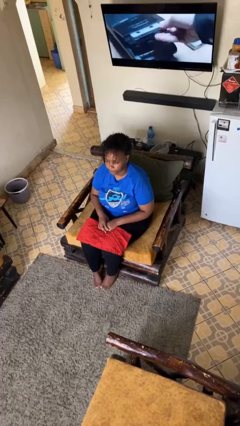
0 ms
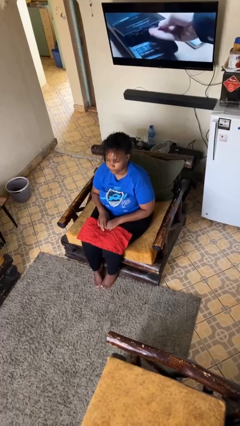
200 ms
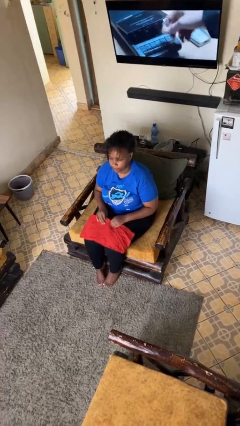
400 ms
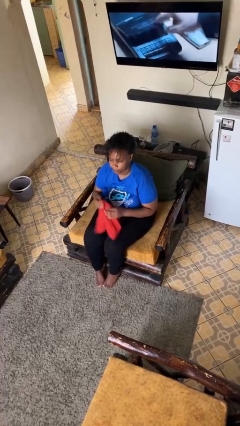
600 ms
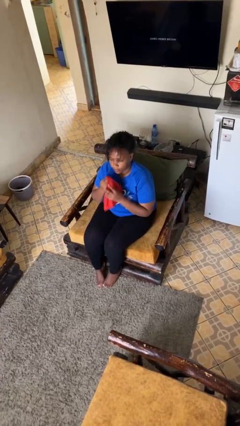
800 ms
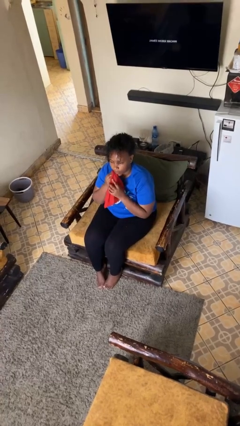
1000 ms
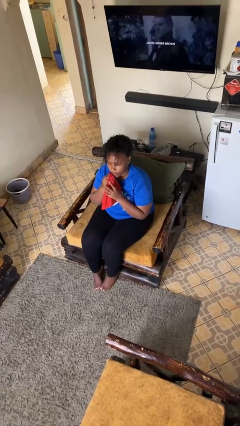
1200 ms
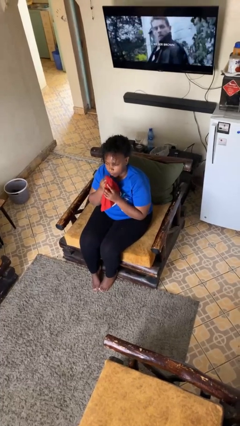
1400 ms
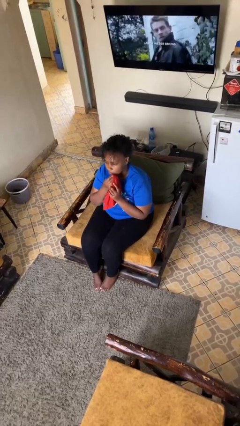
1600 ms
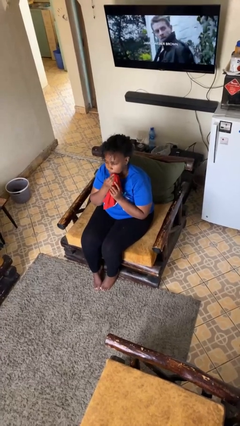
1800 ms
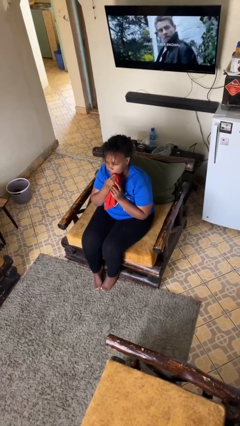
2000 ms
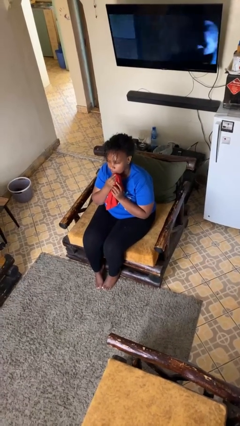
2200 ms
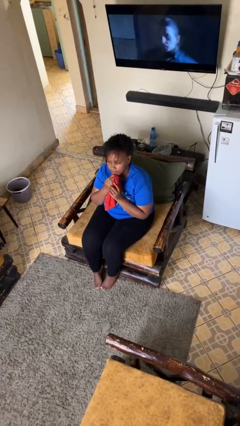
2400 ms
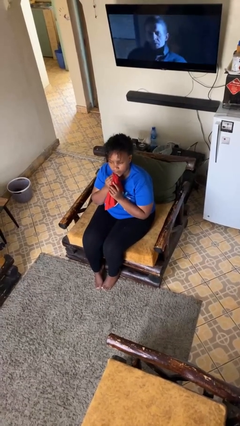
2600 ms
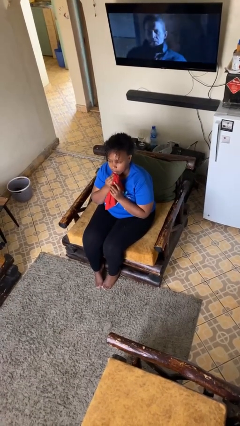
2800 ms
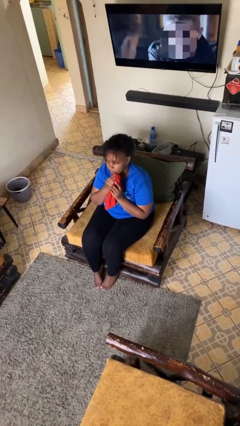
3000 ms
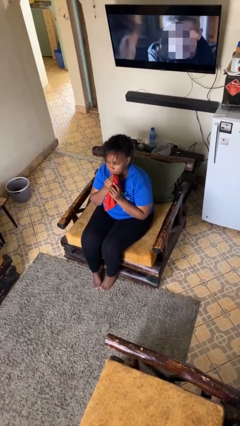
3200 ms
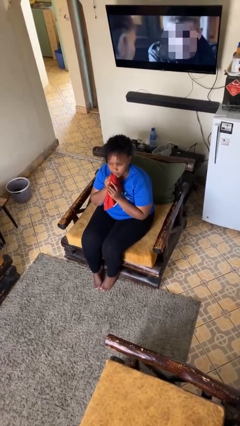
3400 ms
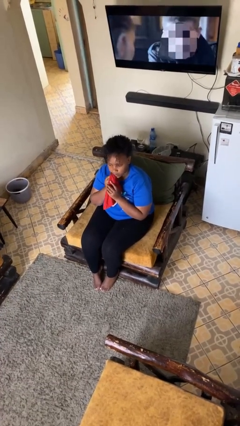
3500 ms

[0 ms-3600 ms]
person wipes mouth with napkin

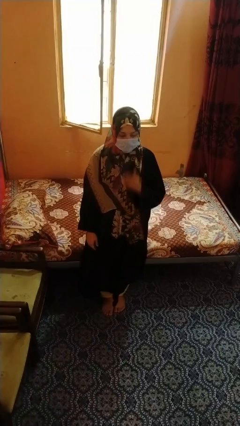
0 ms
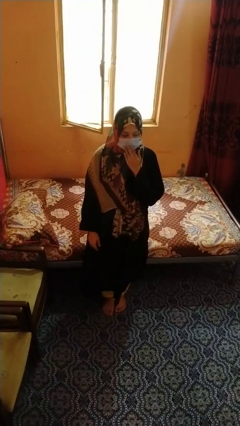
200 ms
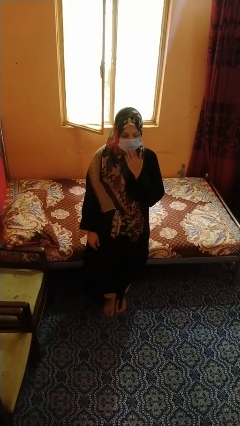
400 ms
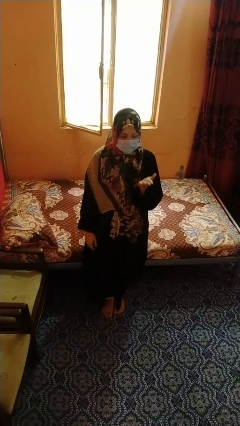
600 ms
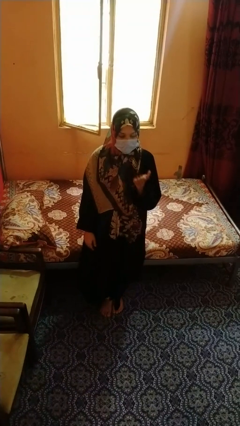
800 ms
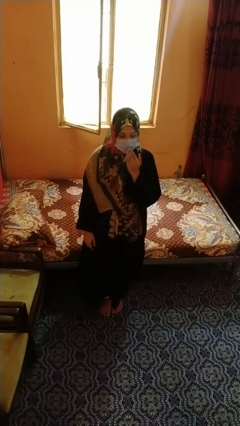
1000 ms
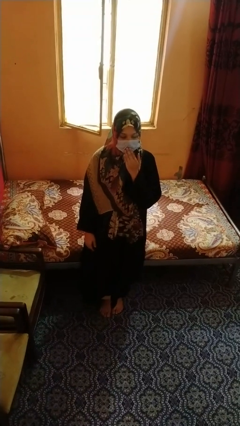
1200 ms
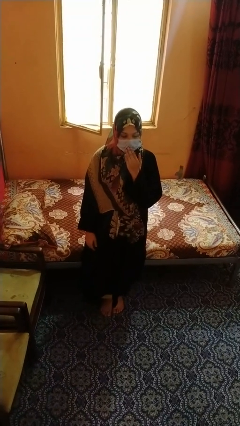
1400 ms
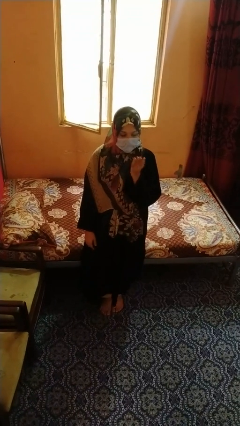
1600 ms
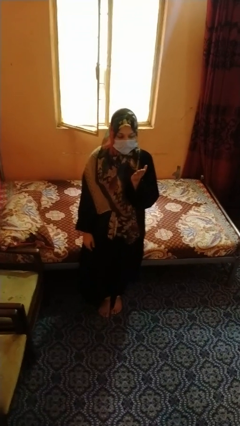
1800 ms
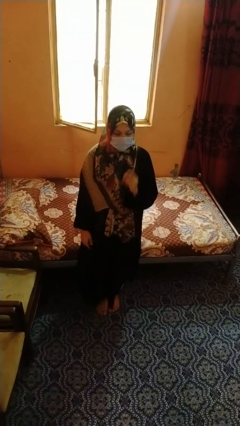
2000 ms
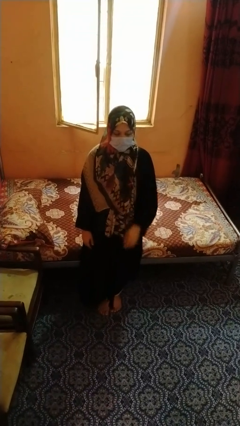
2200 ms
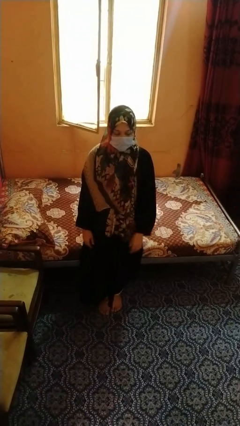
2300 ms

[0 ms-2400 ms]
person gestures blow kiss

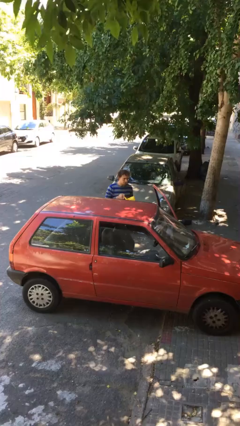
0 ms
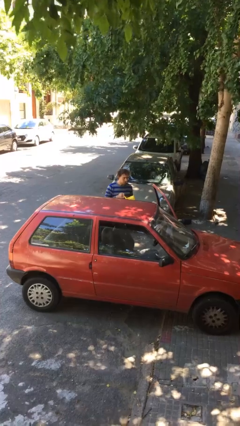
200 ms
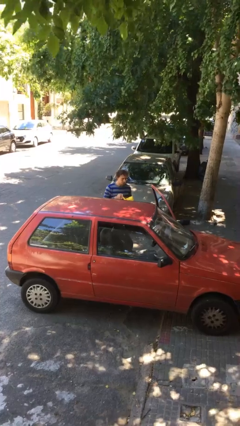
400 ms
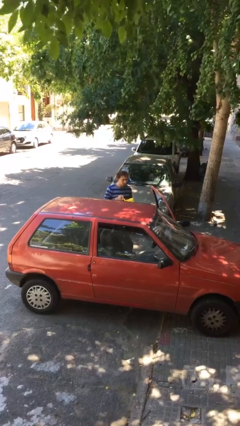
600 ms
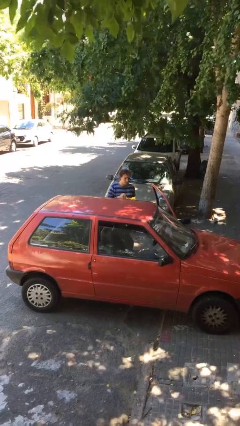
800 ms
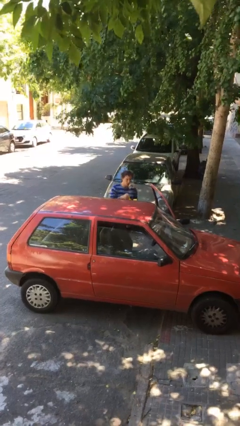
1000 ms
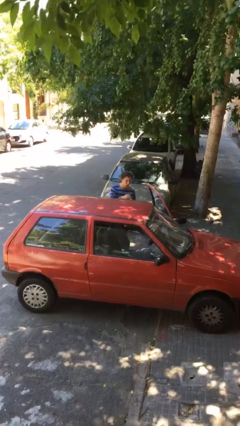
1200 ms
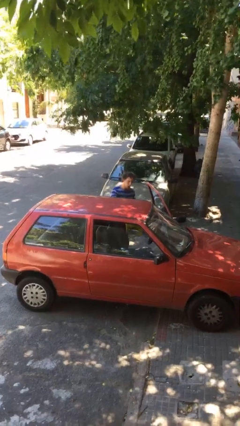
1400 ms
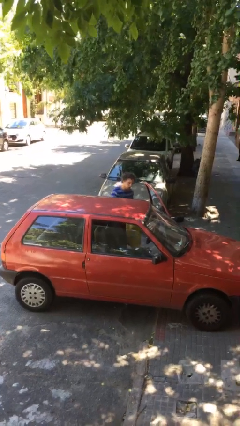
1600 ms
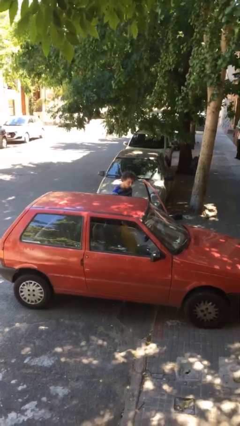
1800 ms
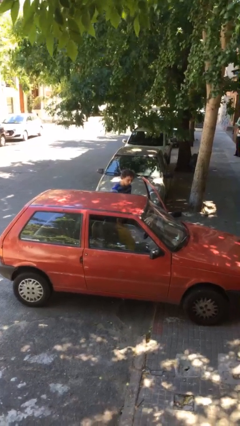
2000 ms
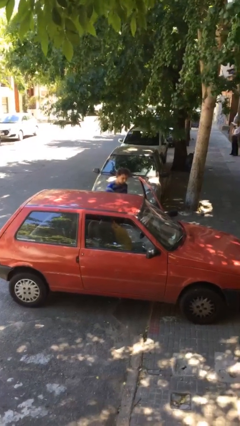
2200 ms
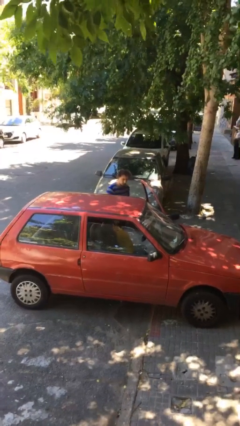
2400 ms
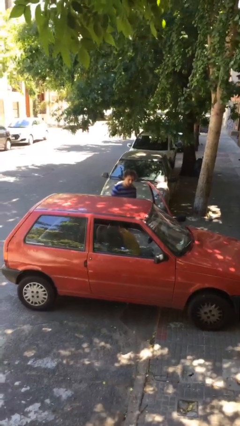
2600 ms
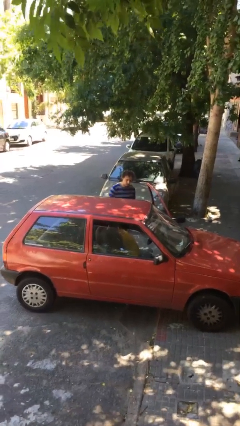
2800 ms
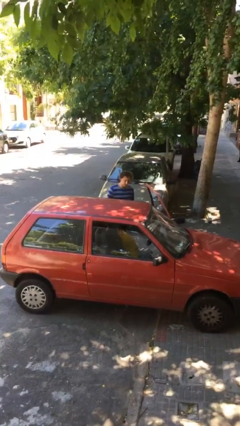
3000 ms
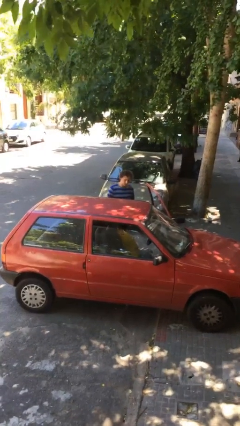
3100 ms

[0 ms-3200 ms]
person loads car

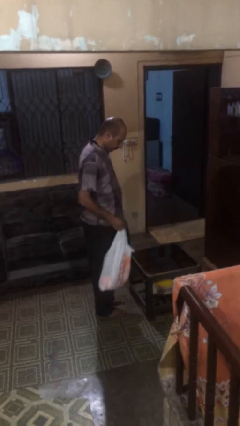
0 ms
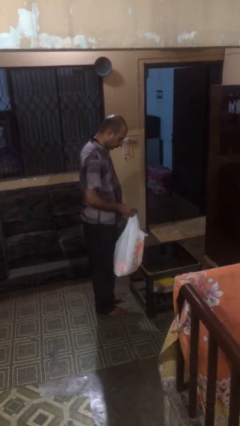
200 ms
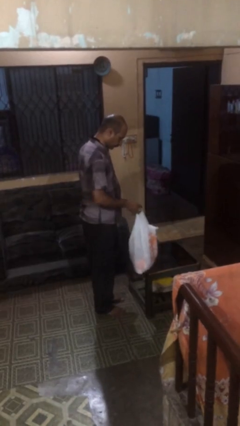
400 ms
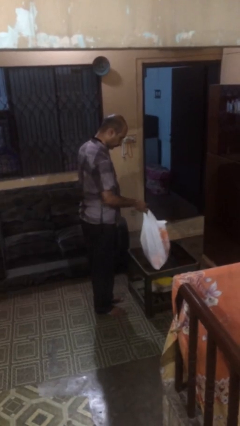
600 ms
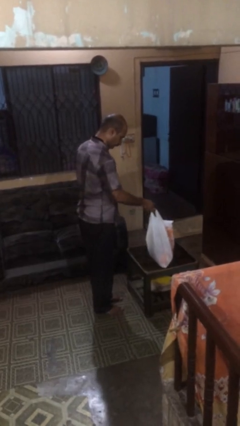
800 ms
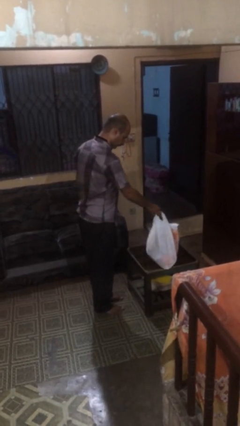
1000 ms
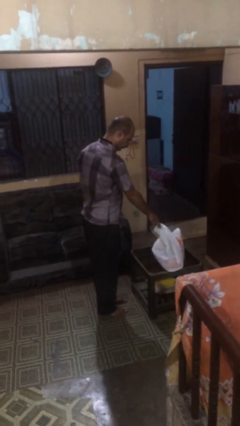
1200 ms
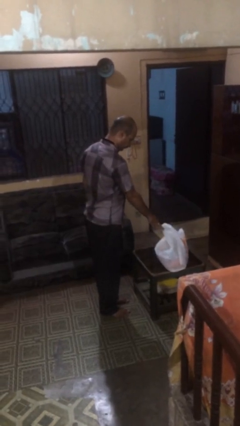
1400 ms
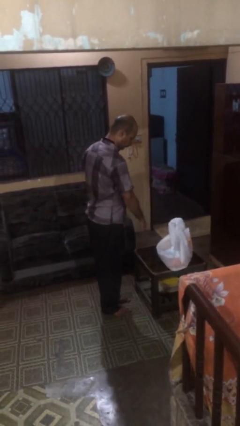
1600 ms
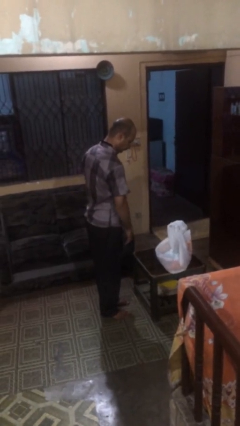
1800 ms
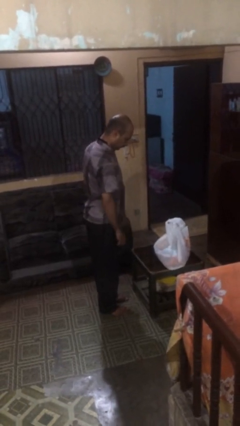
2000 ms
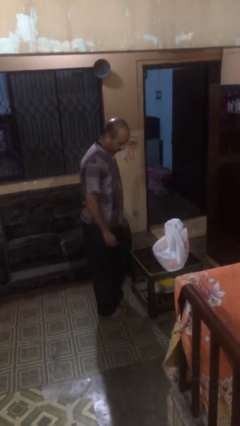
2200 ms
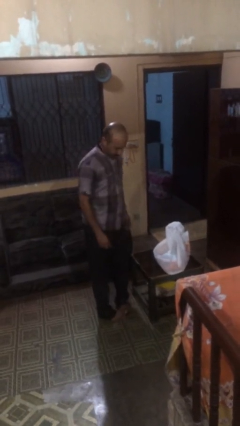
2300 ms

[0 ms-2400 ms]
person puts down object on table

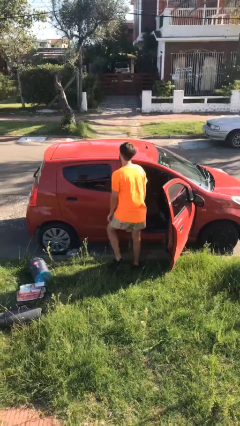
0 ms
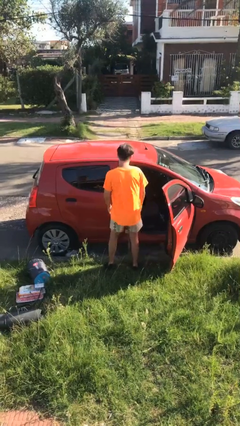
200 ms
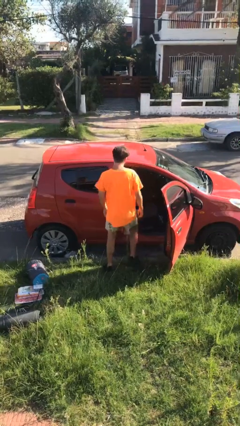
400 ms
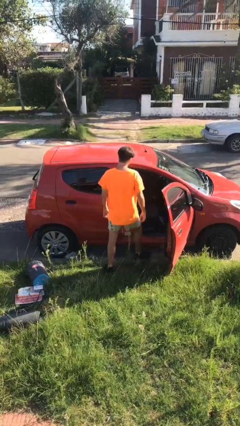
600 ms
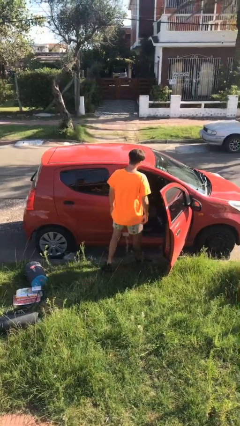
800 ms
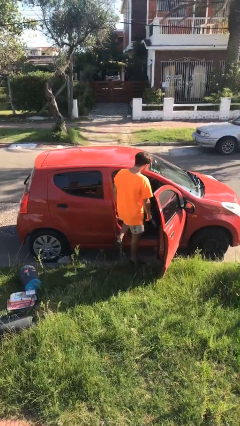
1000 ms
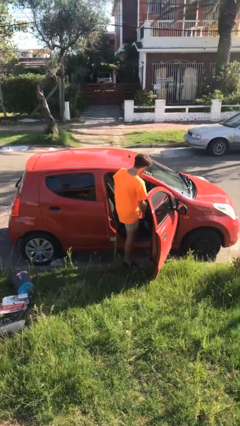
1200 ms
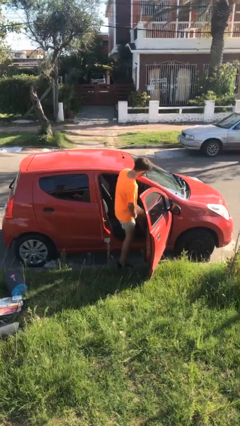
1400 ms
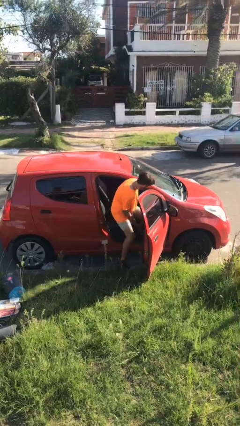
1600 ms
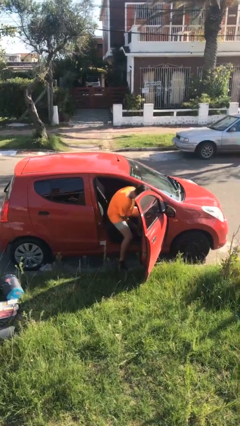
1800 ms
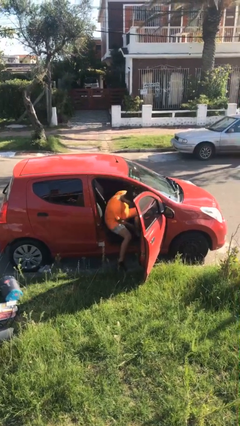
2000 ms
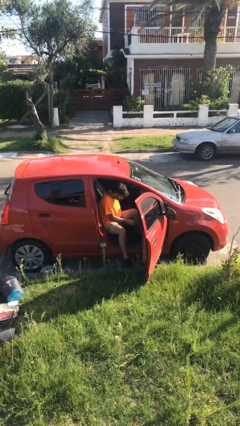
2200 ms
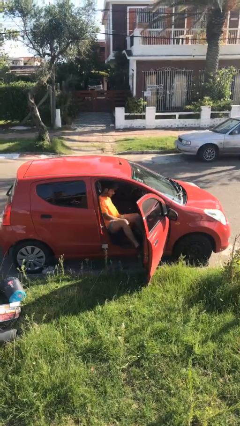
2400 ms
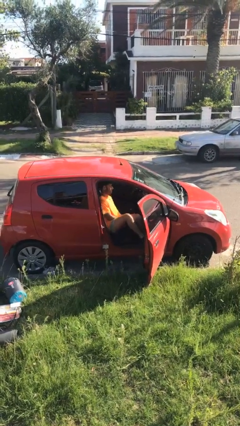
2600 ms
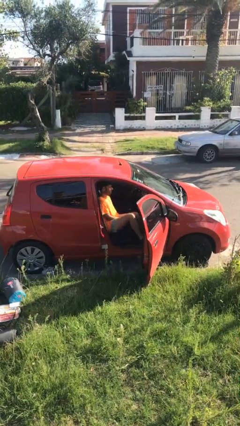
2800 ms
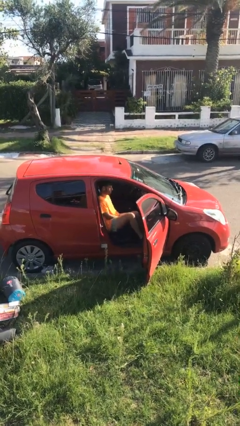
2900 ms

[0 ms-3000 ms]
person enters car

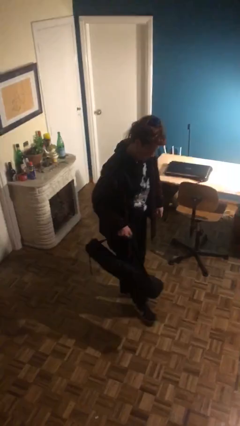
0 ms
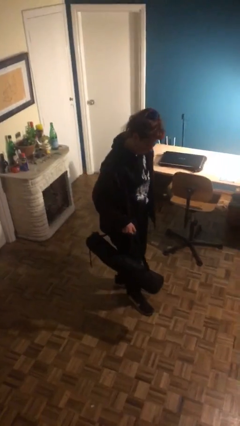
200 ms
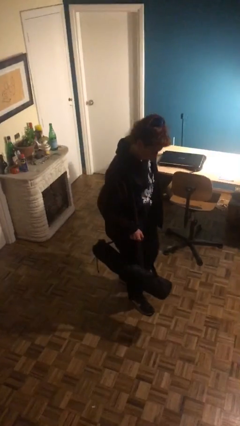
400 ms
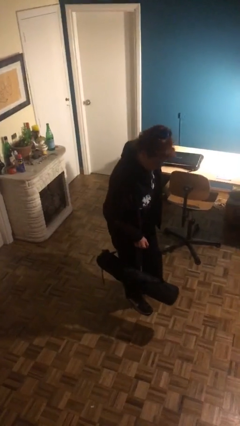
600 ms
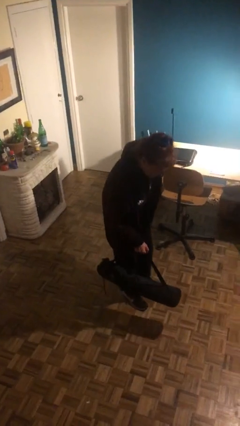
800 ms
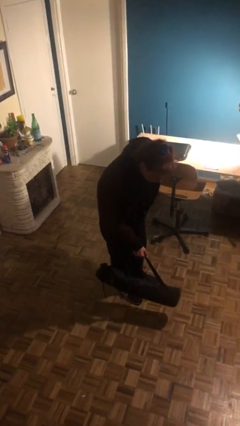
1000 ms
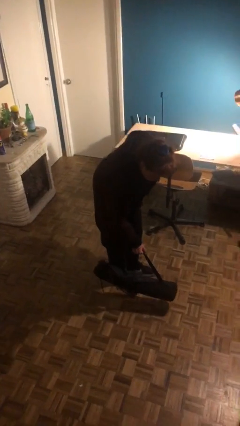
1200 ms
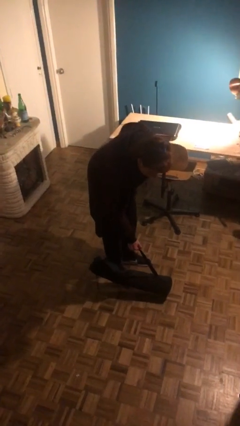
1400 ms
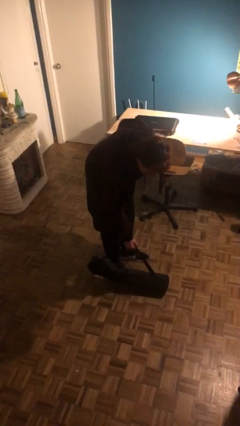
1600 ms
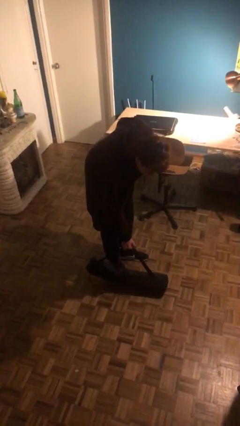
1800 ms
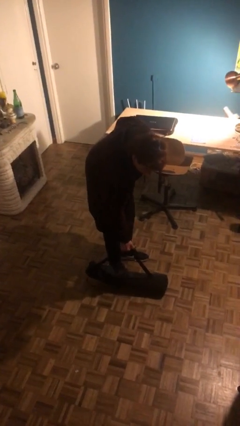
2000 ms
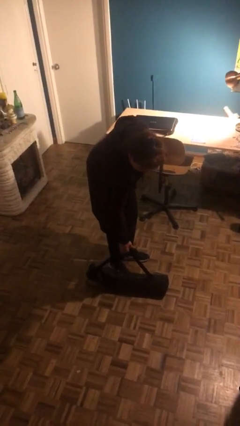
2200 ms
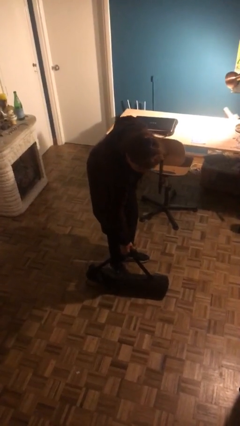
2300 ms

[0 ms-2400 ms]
person puts down object on floor

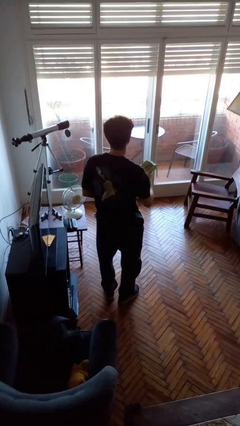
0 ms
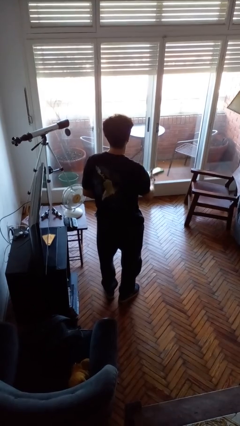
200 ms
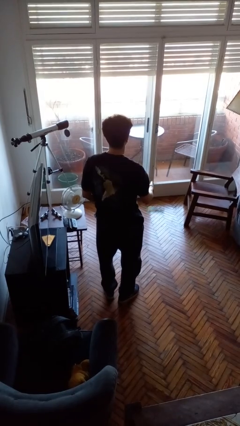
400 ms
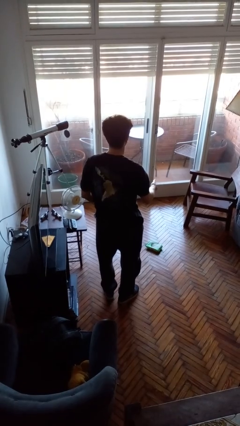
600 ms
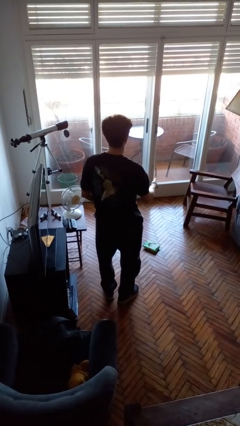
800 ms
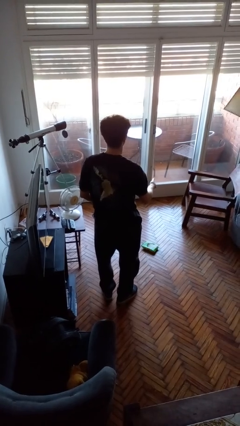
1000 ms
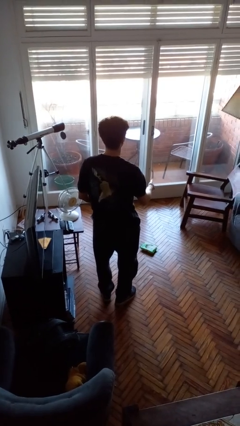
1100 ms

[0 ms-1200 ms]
person throws object to ground
